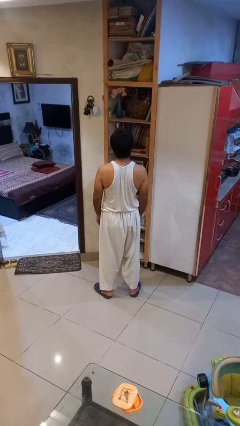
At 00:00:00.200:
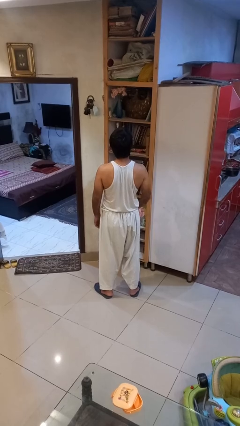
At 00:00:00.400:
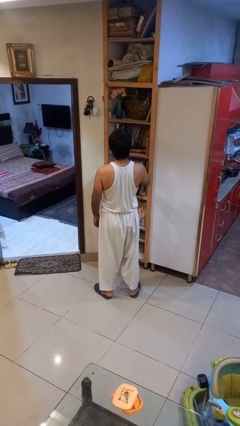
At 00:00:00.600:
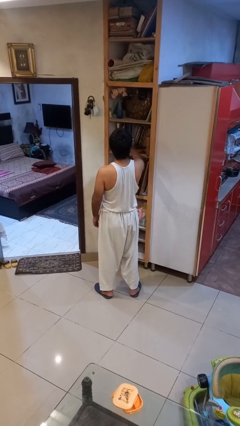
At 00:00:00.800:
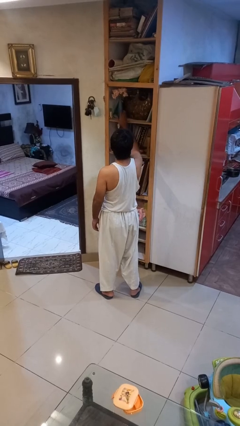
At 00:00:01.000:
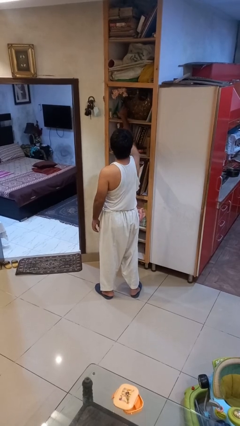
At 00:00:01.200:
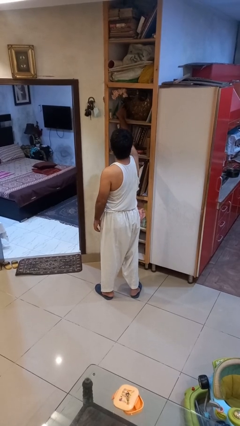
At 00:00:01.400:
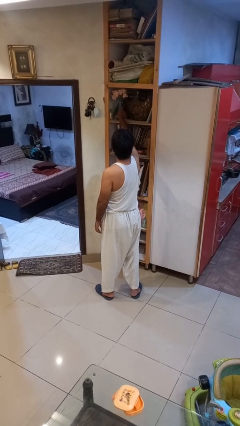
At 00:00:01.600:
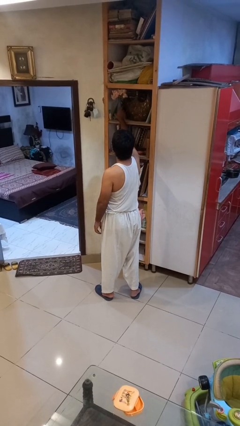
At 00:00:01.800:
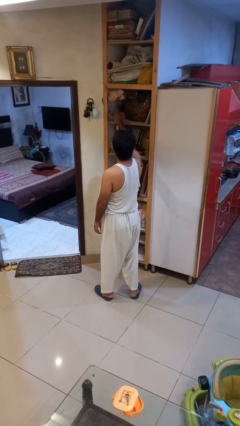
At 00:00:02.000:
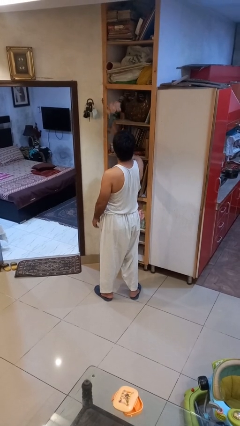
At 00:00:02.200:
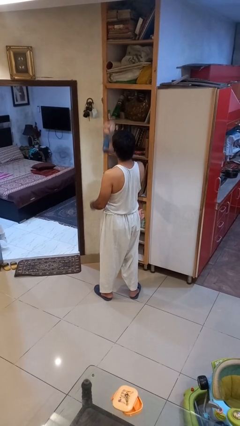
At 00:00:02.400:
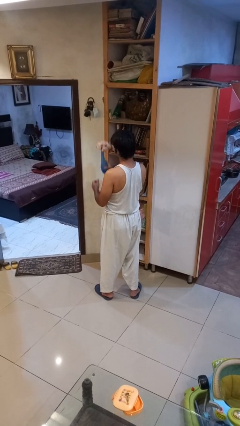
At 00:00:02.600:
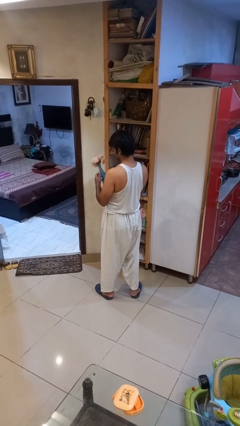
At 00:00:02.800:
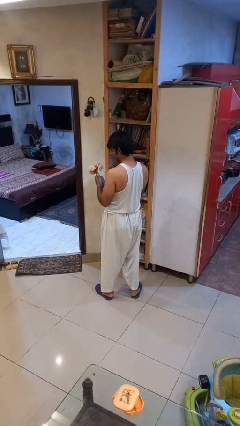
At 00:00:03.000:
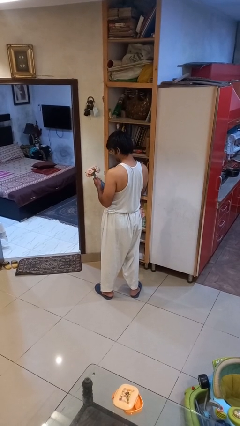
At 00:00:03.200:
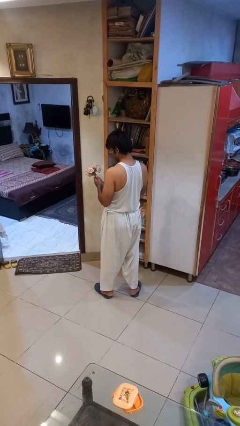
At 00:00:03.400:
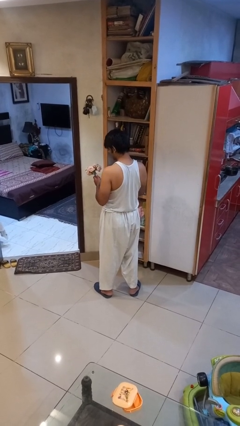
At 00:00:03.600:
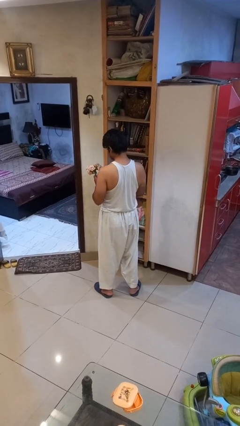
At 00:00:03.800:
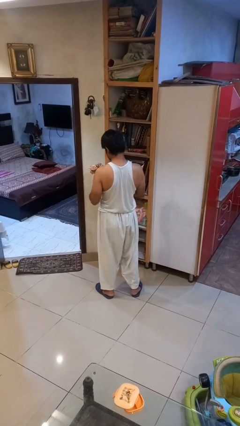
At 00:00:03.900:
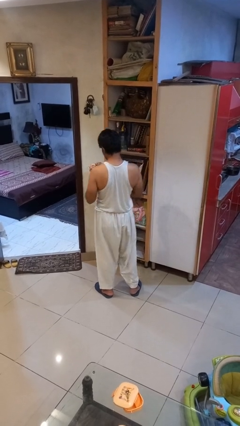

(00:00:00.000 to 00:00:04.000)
person picks up object from shelf

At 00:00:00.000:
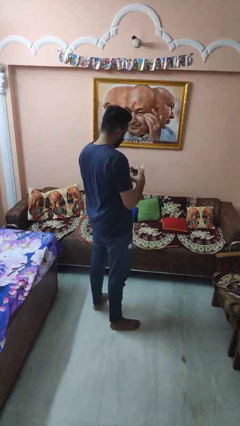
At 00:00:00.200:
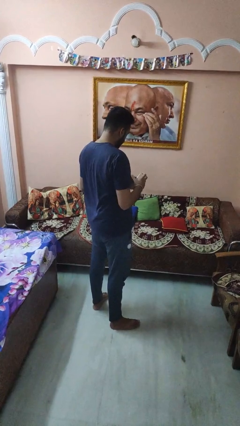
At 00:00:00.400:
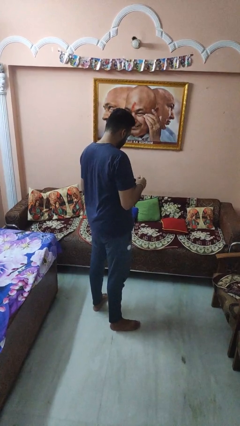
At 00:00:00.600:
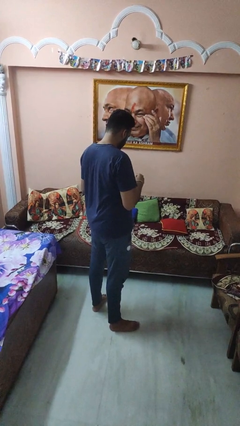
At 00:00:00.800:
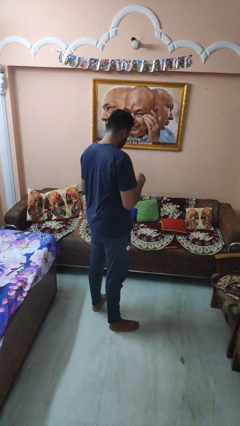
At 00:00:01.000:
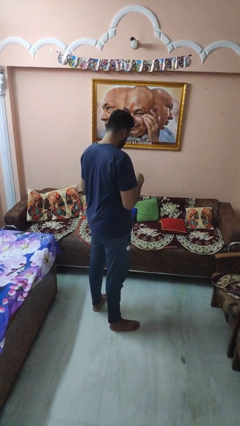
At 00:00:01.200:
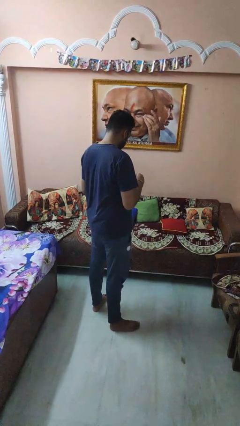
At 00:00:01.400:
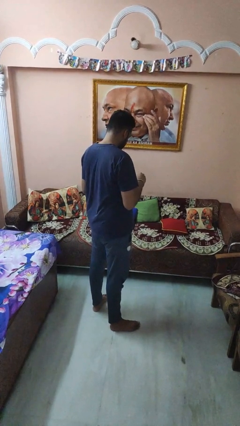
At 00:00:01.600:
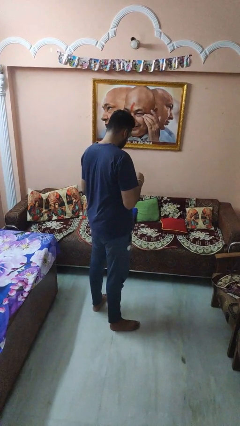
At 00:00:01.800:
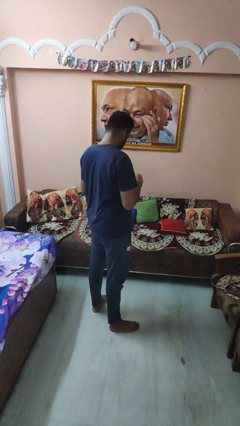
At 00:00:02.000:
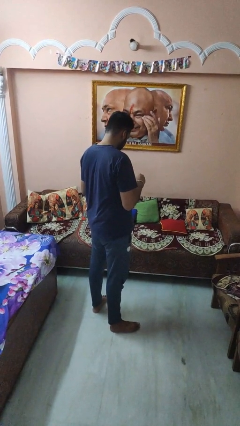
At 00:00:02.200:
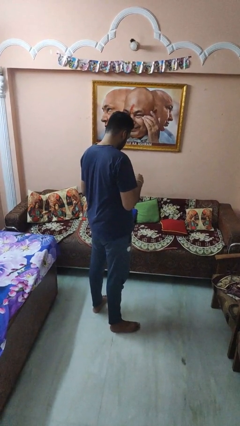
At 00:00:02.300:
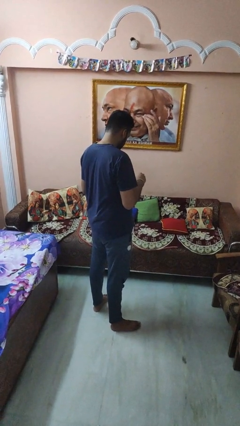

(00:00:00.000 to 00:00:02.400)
person stirs mug

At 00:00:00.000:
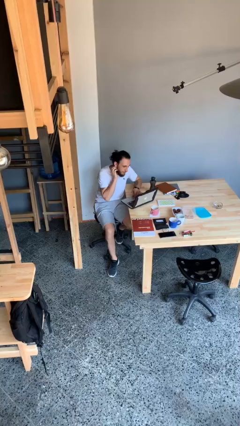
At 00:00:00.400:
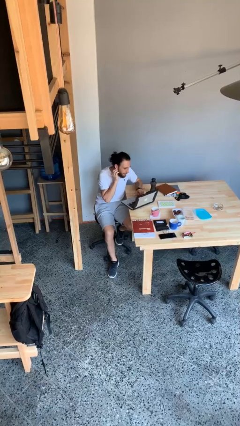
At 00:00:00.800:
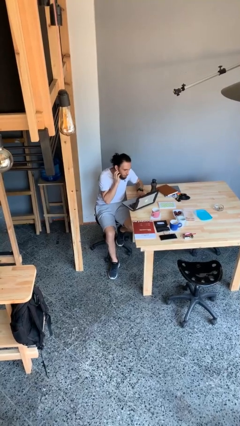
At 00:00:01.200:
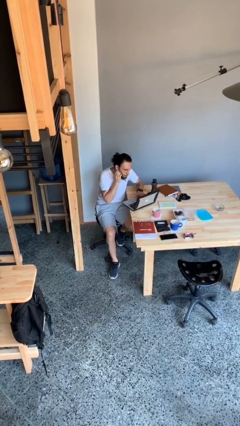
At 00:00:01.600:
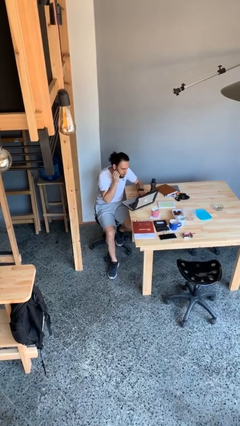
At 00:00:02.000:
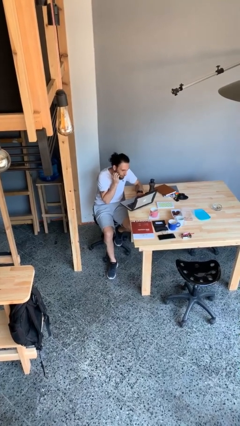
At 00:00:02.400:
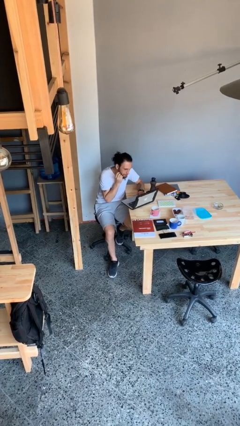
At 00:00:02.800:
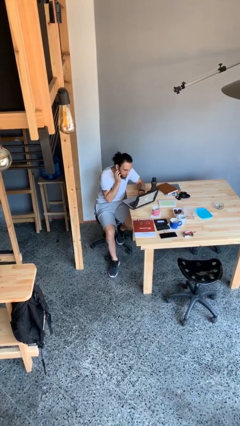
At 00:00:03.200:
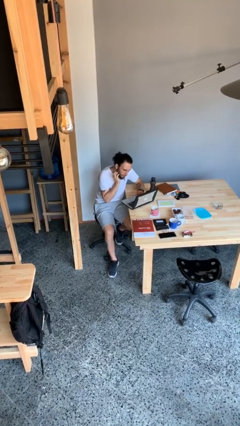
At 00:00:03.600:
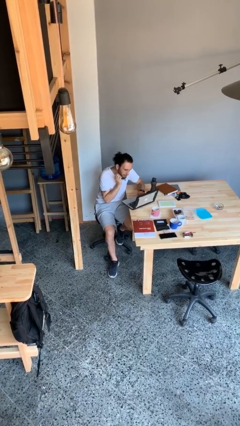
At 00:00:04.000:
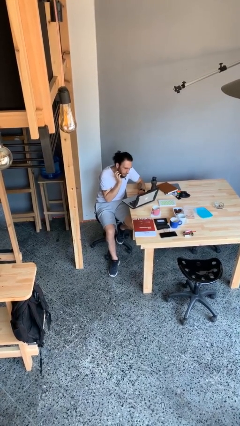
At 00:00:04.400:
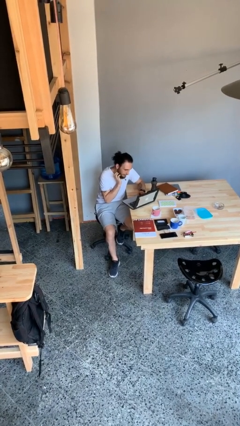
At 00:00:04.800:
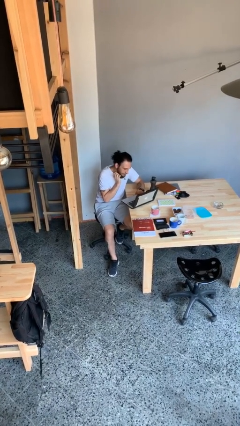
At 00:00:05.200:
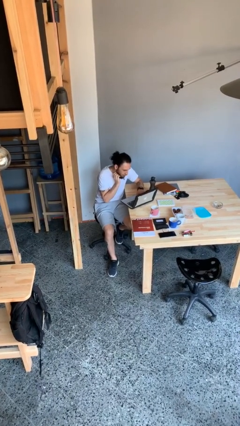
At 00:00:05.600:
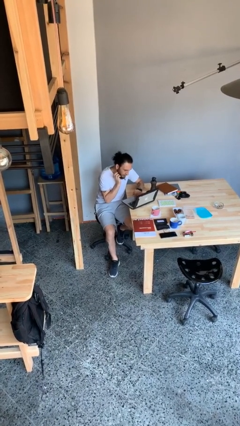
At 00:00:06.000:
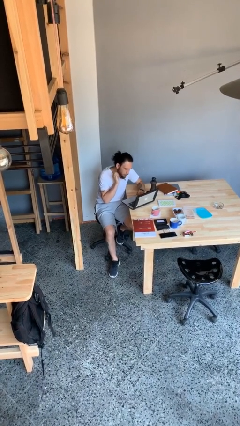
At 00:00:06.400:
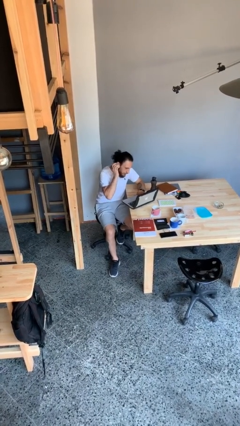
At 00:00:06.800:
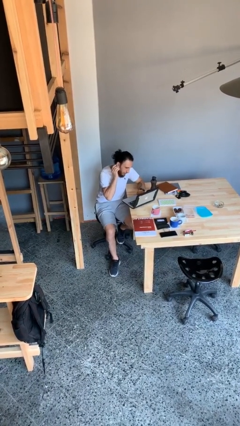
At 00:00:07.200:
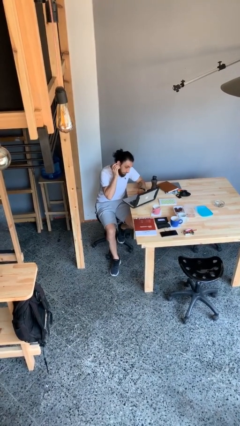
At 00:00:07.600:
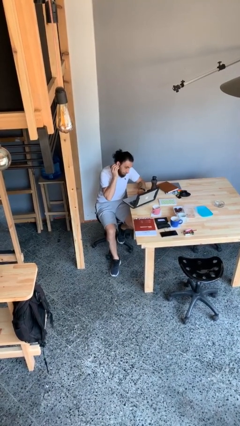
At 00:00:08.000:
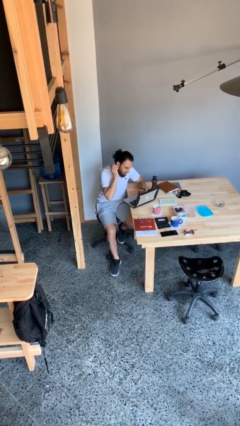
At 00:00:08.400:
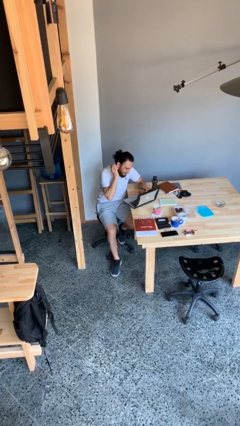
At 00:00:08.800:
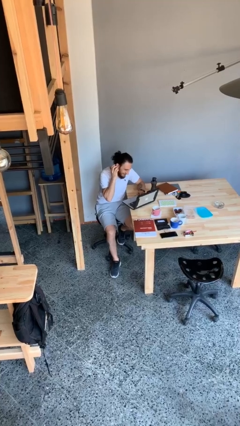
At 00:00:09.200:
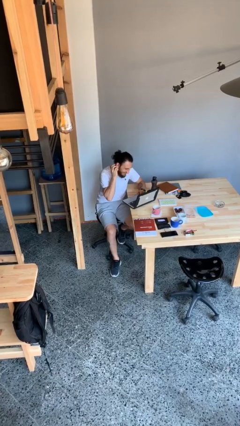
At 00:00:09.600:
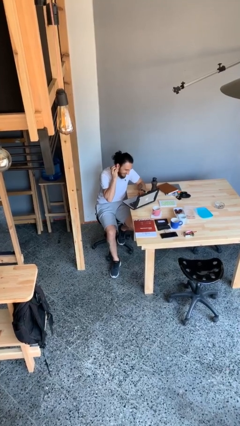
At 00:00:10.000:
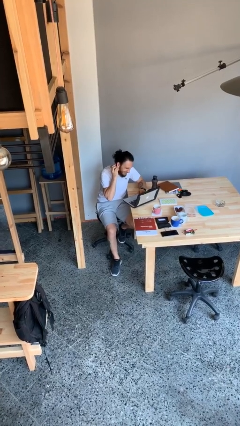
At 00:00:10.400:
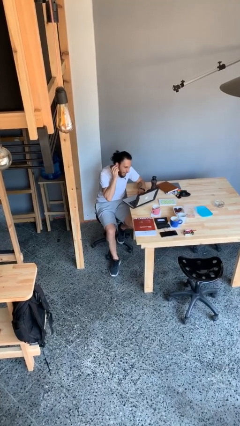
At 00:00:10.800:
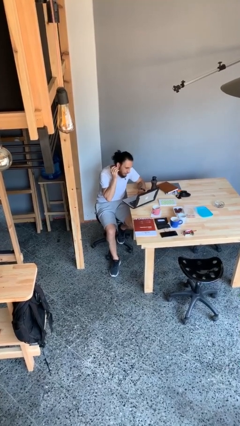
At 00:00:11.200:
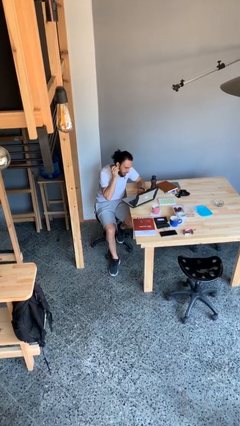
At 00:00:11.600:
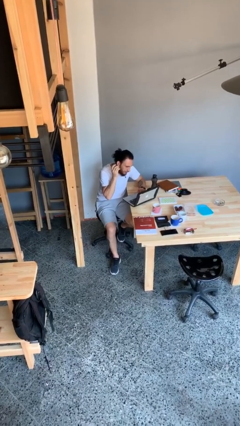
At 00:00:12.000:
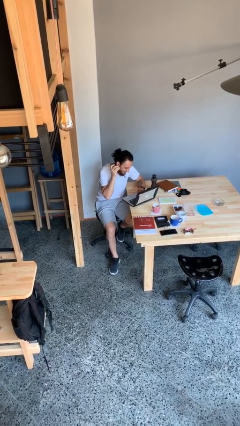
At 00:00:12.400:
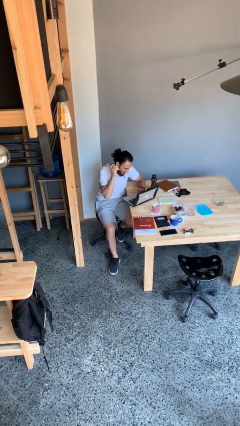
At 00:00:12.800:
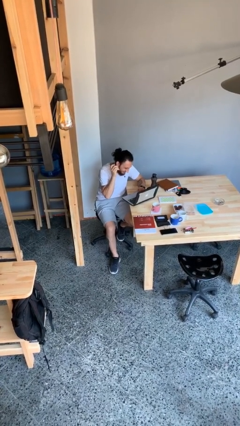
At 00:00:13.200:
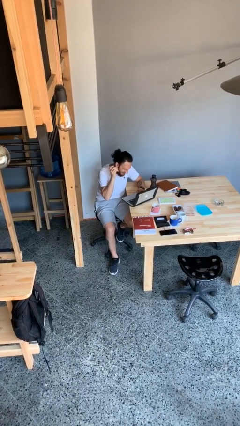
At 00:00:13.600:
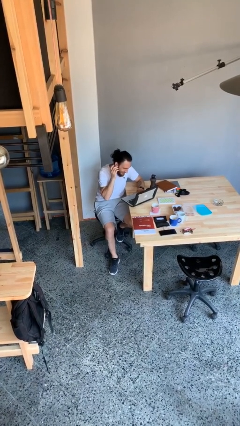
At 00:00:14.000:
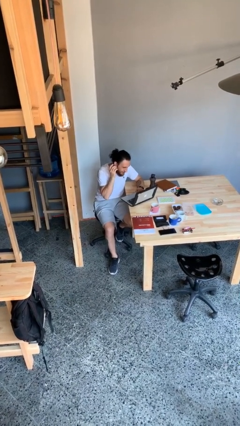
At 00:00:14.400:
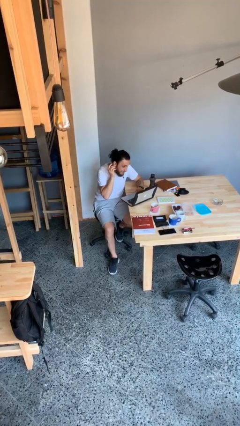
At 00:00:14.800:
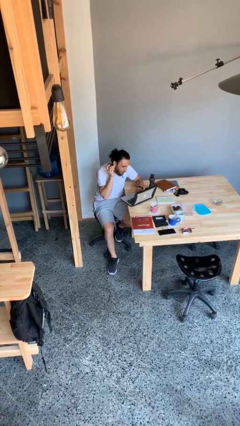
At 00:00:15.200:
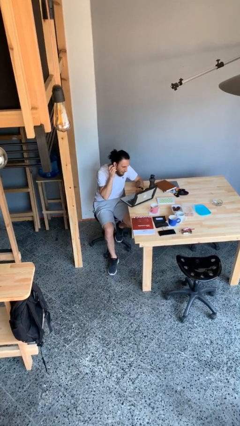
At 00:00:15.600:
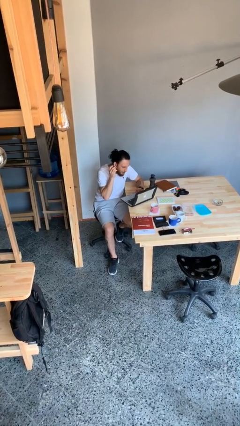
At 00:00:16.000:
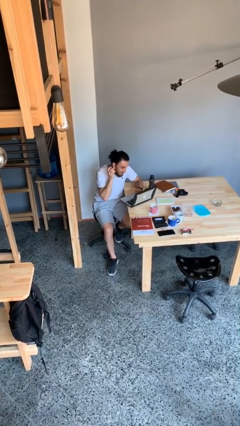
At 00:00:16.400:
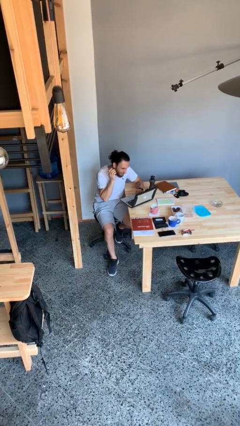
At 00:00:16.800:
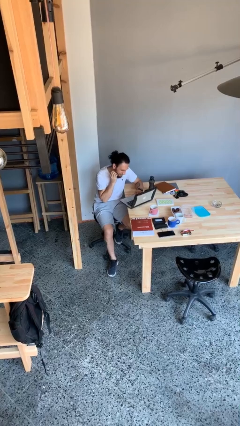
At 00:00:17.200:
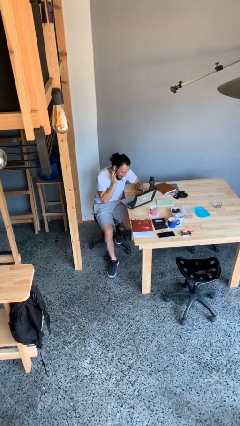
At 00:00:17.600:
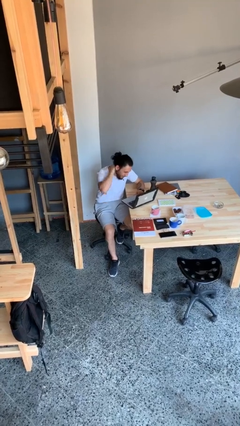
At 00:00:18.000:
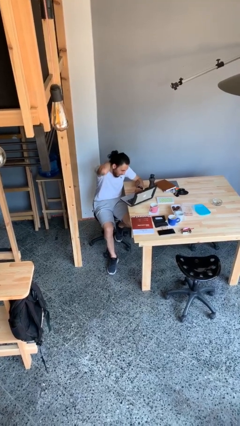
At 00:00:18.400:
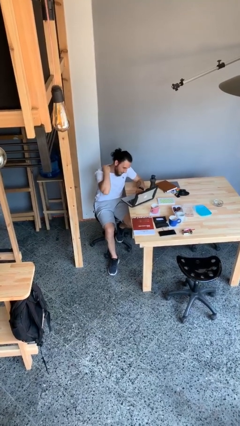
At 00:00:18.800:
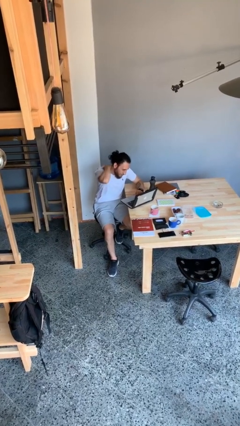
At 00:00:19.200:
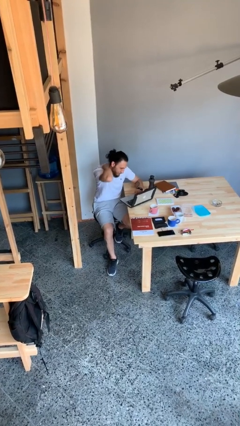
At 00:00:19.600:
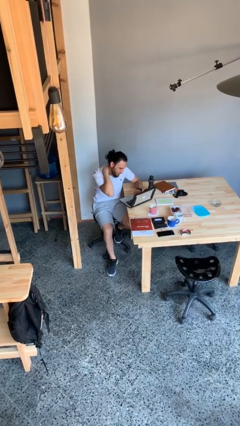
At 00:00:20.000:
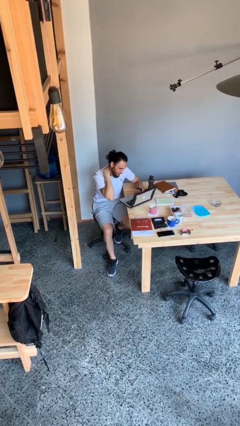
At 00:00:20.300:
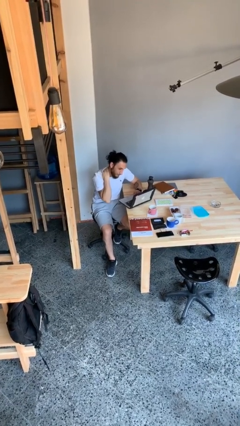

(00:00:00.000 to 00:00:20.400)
person interacts with laptop

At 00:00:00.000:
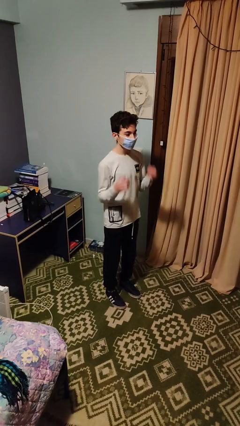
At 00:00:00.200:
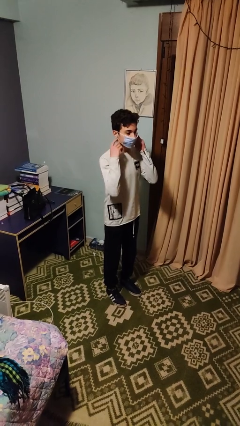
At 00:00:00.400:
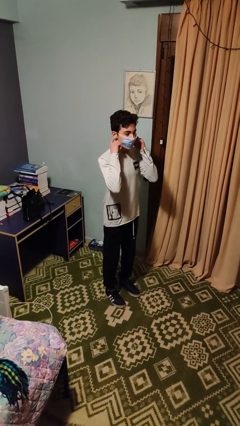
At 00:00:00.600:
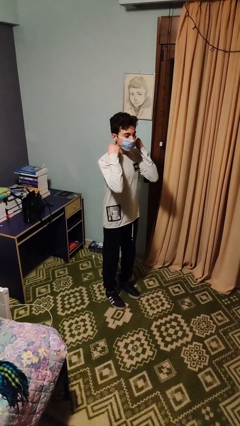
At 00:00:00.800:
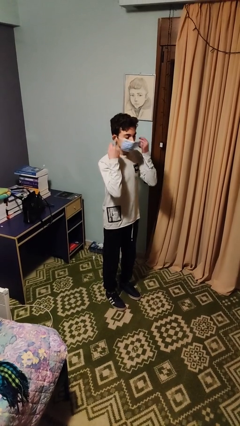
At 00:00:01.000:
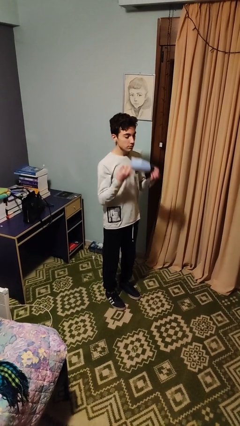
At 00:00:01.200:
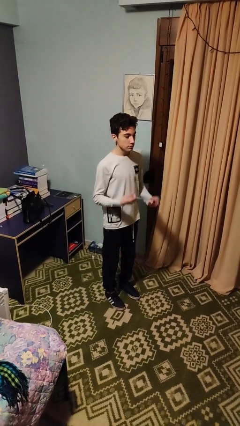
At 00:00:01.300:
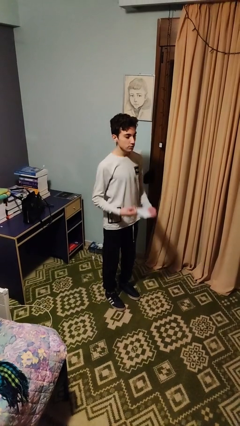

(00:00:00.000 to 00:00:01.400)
person takes off facemask
